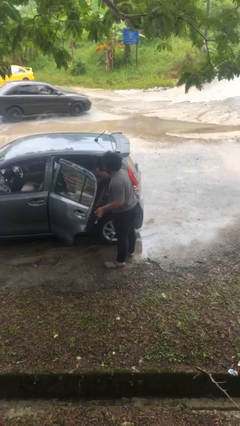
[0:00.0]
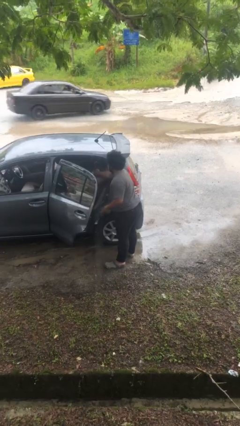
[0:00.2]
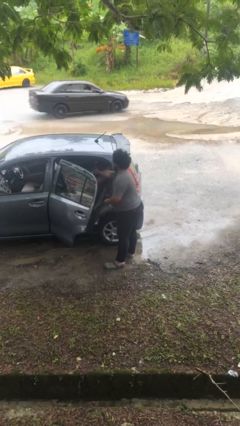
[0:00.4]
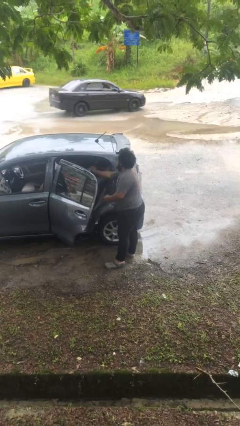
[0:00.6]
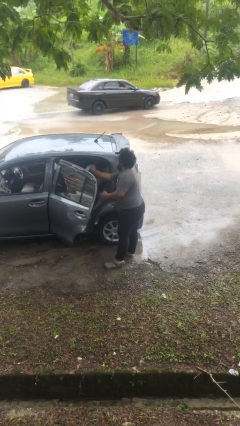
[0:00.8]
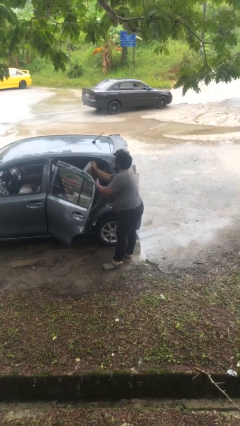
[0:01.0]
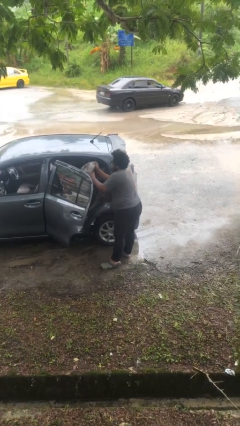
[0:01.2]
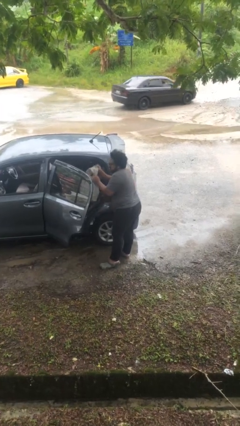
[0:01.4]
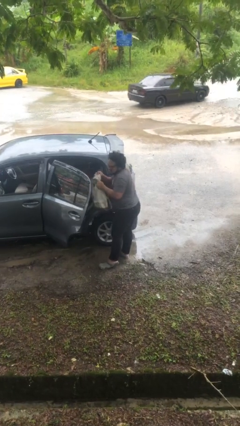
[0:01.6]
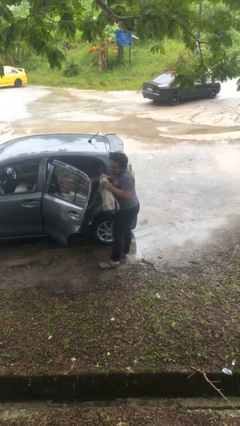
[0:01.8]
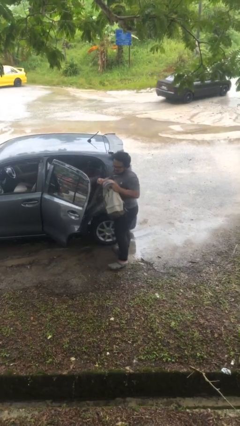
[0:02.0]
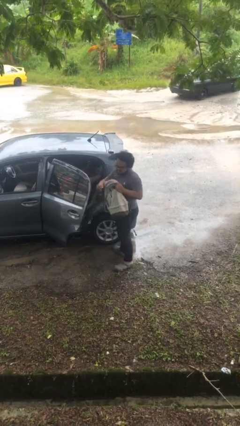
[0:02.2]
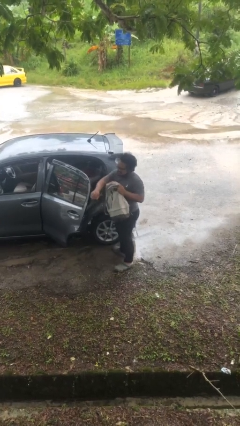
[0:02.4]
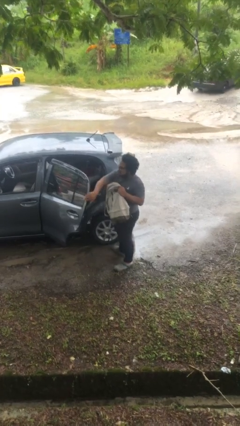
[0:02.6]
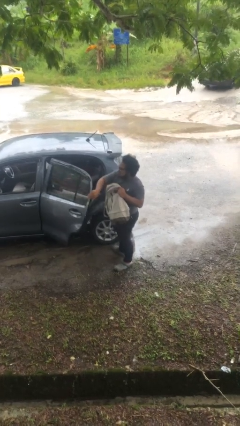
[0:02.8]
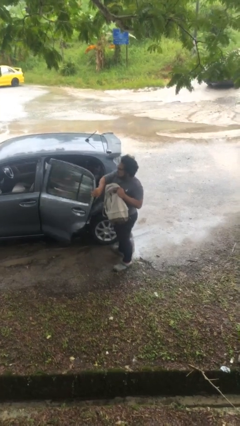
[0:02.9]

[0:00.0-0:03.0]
person unloads car

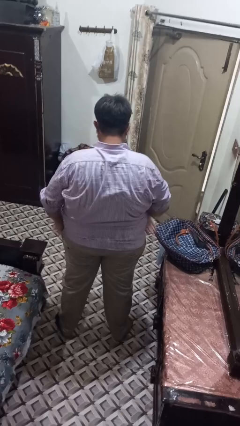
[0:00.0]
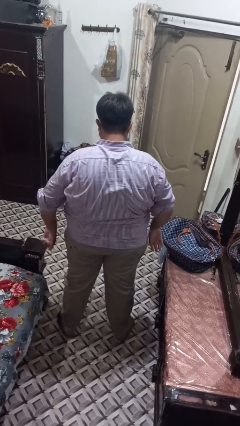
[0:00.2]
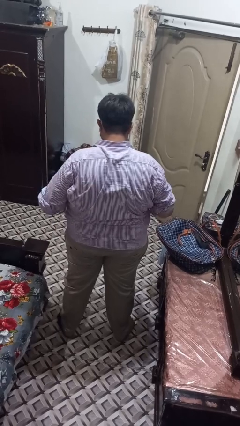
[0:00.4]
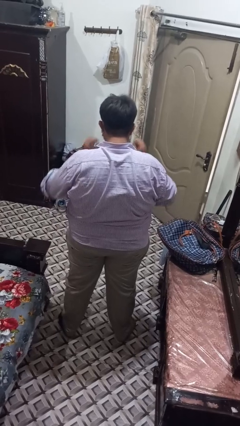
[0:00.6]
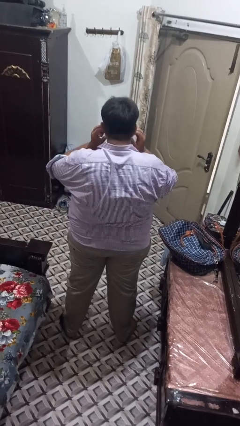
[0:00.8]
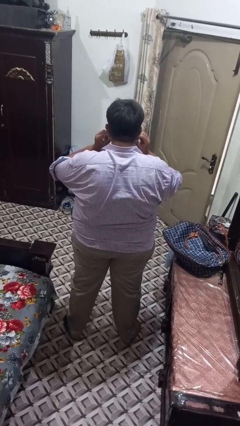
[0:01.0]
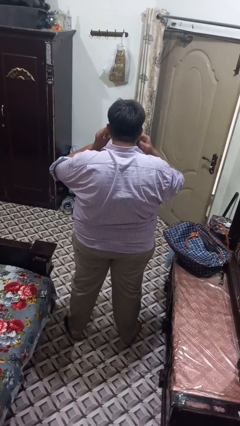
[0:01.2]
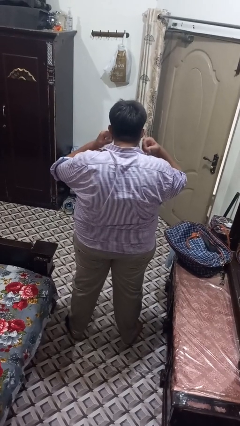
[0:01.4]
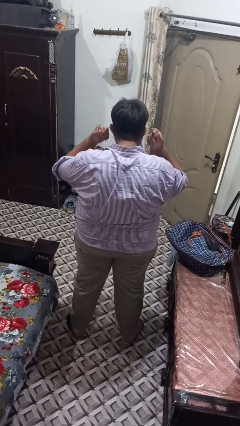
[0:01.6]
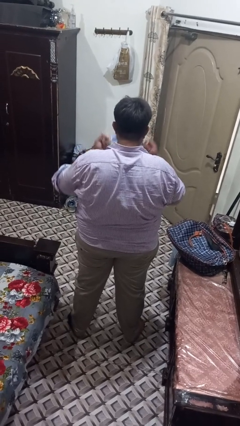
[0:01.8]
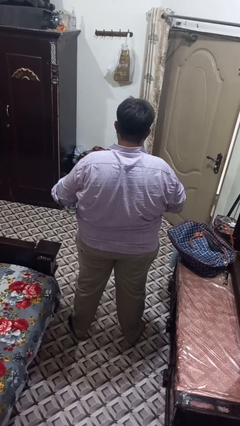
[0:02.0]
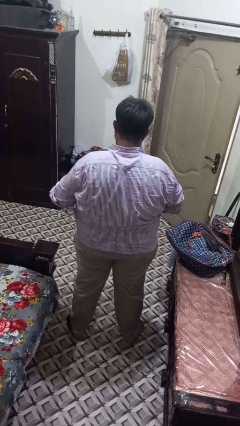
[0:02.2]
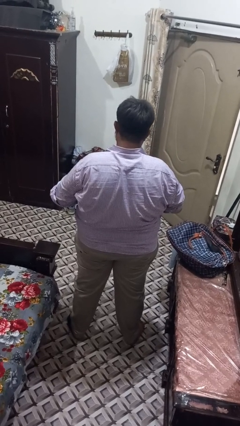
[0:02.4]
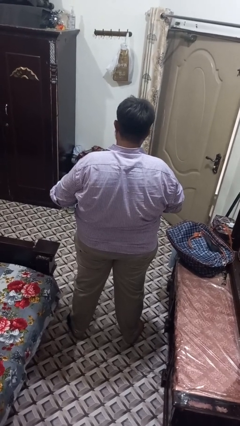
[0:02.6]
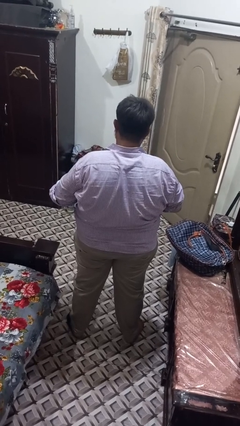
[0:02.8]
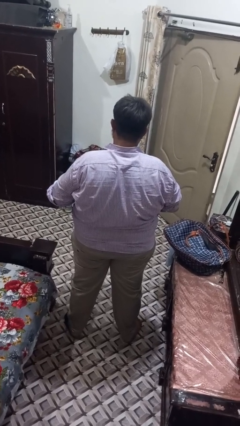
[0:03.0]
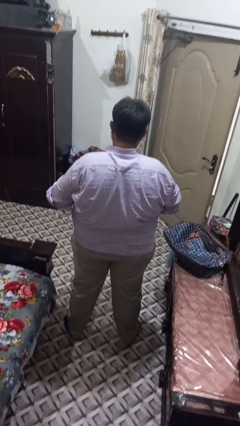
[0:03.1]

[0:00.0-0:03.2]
person takes off facemask

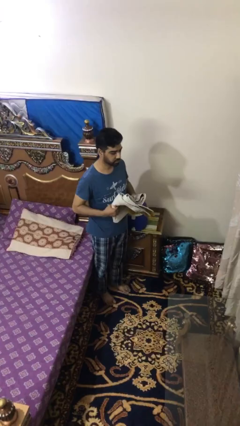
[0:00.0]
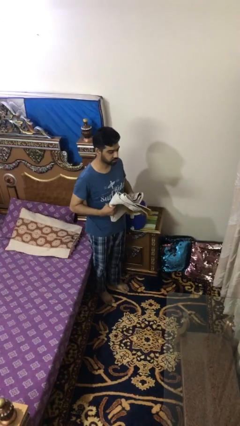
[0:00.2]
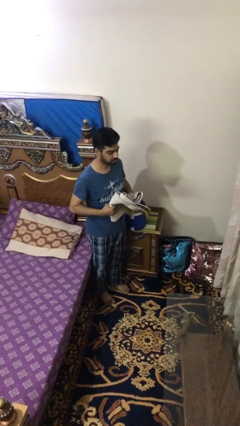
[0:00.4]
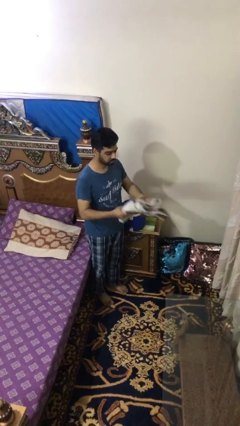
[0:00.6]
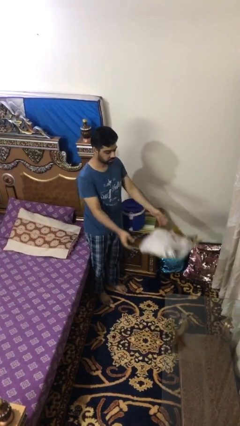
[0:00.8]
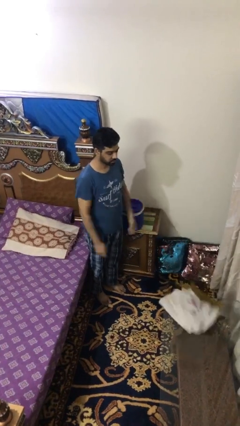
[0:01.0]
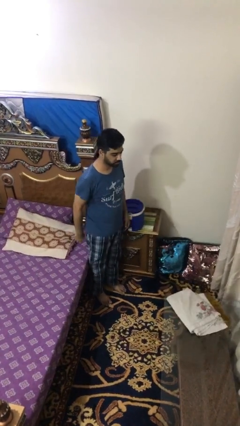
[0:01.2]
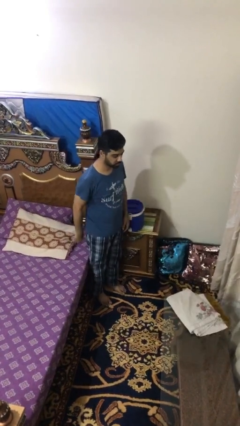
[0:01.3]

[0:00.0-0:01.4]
person throws object on table

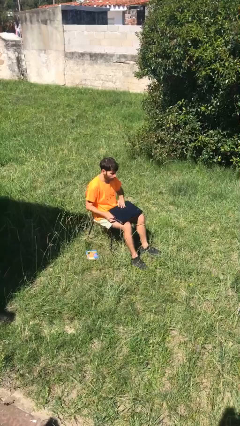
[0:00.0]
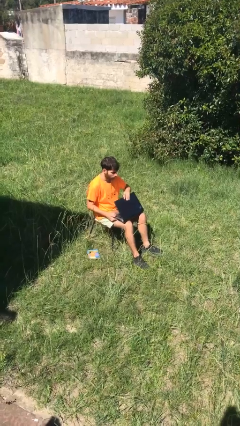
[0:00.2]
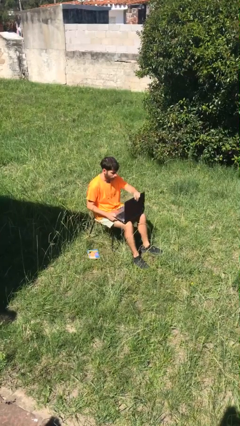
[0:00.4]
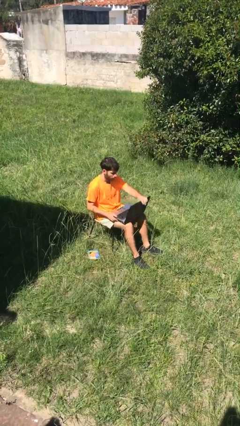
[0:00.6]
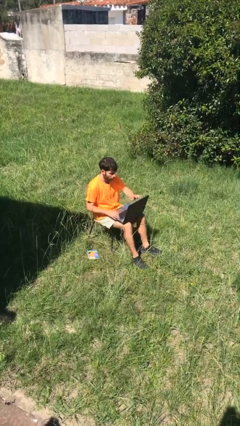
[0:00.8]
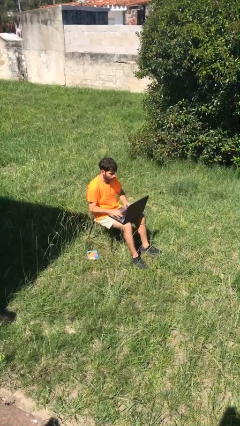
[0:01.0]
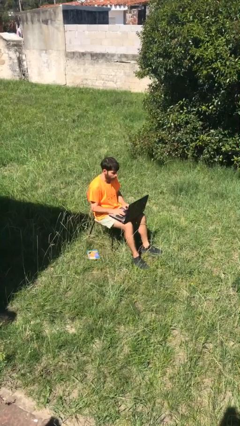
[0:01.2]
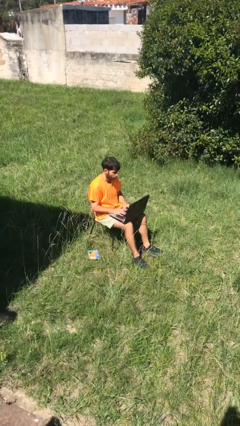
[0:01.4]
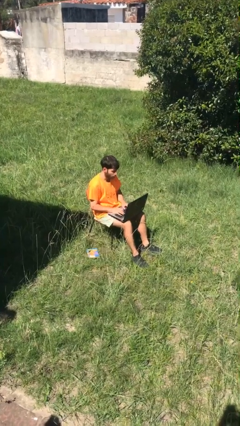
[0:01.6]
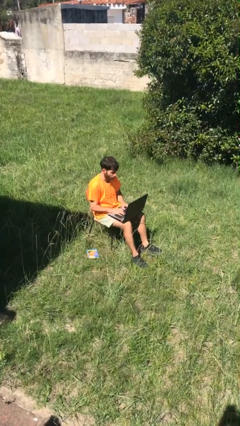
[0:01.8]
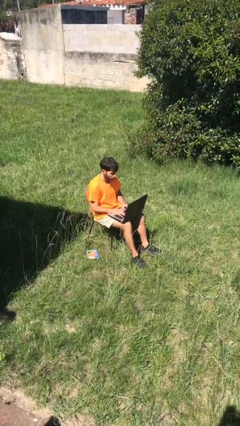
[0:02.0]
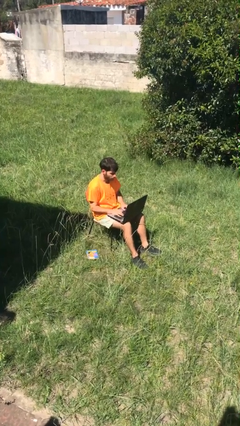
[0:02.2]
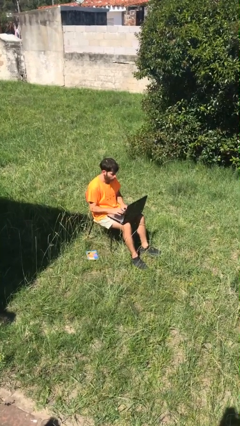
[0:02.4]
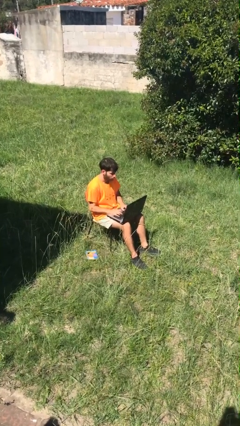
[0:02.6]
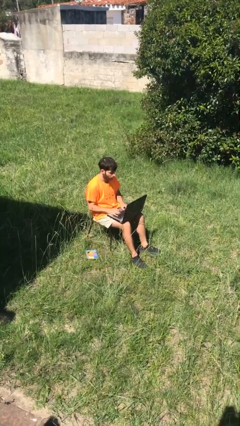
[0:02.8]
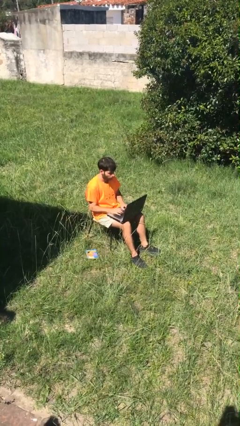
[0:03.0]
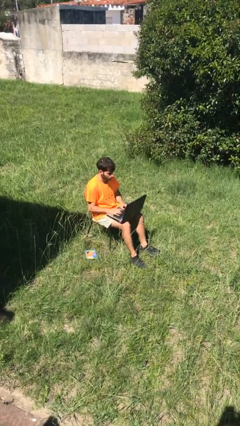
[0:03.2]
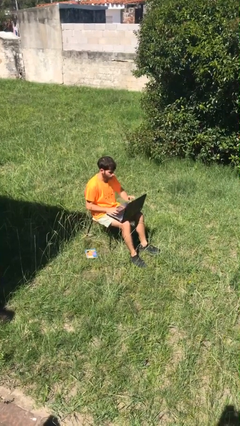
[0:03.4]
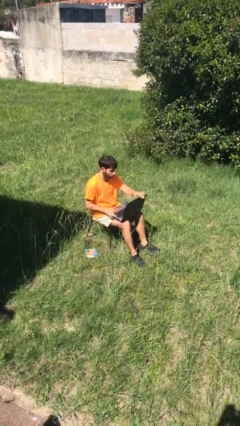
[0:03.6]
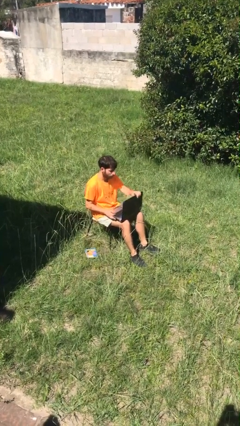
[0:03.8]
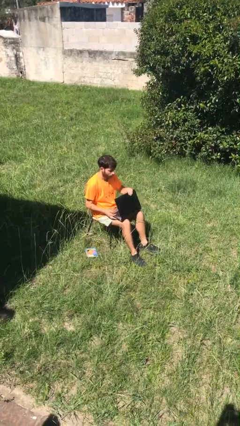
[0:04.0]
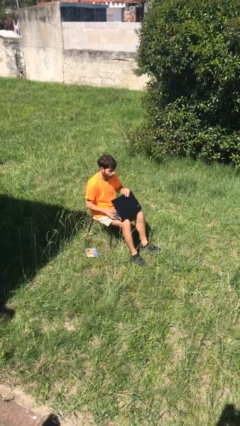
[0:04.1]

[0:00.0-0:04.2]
person interacts with laptop

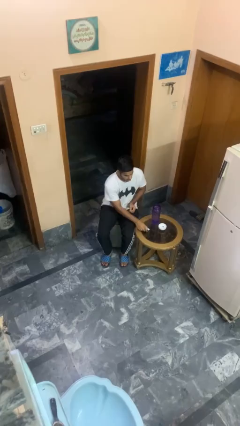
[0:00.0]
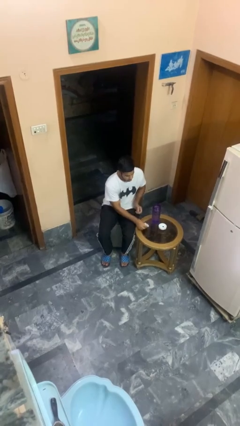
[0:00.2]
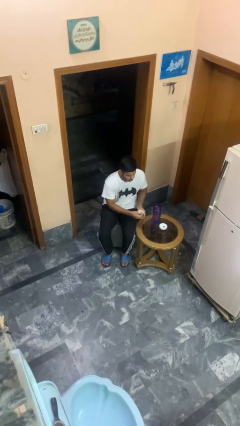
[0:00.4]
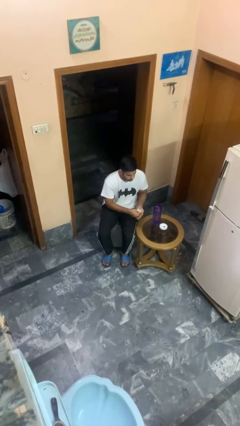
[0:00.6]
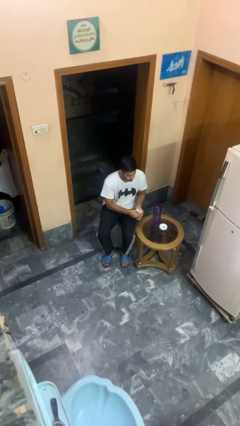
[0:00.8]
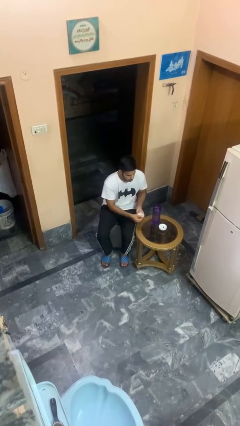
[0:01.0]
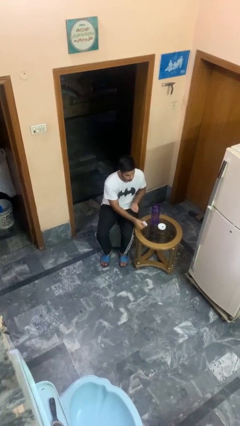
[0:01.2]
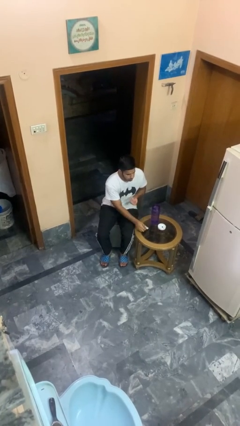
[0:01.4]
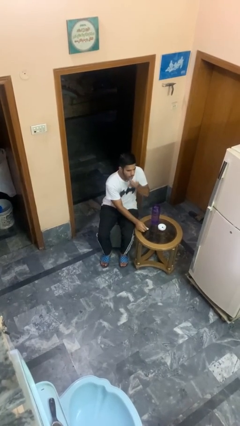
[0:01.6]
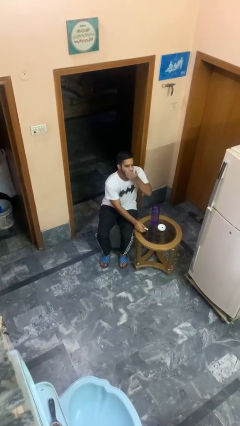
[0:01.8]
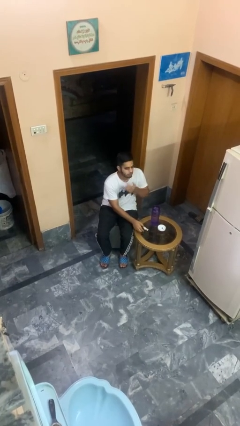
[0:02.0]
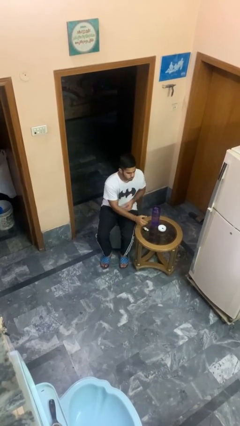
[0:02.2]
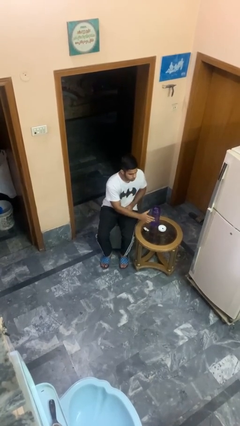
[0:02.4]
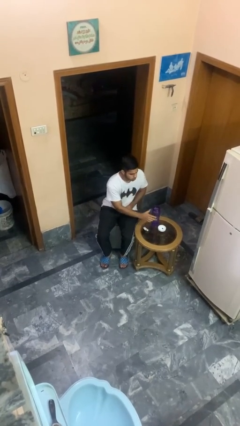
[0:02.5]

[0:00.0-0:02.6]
person takes medicine pills

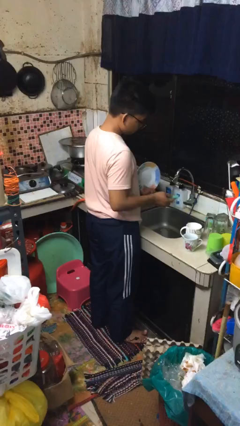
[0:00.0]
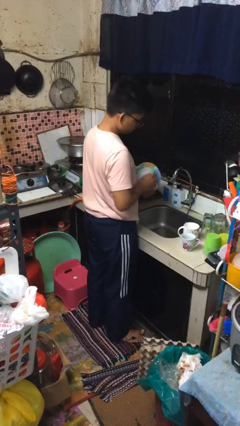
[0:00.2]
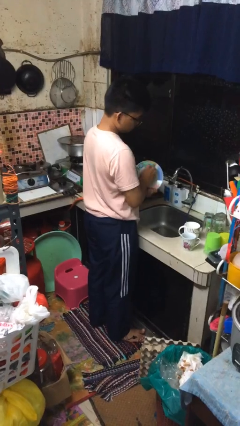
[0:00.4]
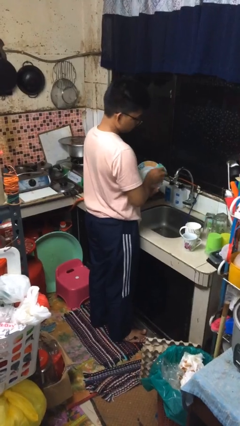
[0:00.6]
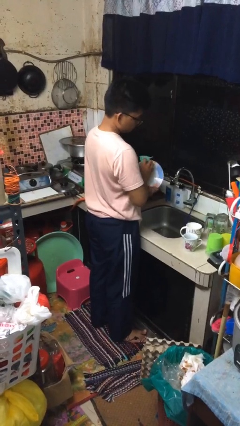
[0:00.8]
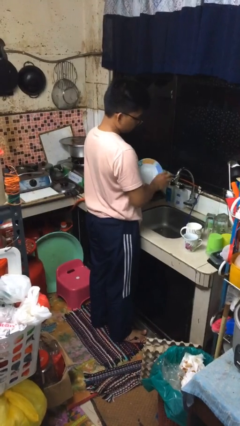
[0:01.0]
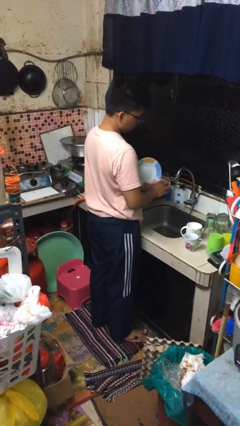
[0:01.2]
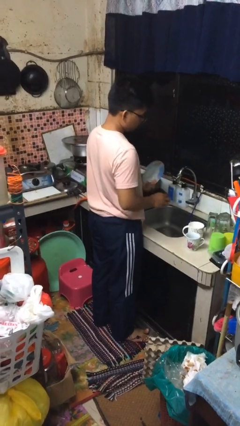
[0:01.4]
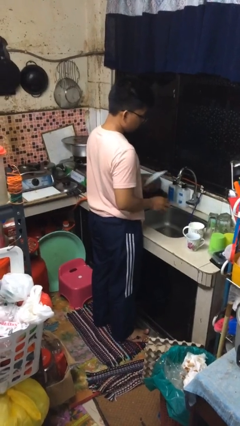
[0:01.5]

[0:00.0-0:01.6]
person washes dish

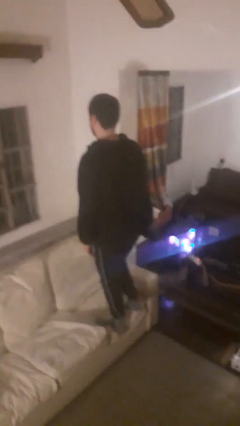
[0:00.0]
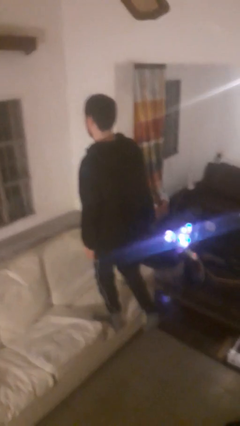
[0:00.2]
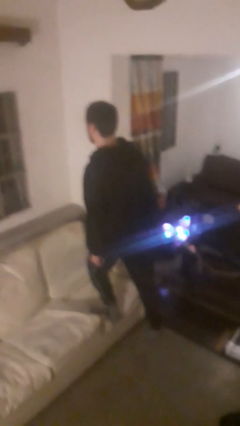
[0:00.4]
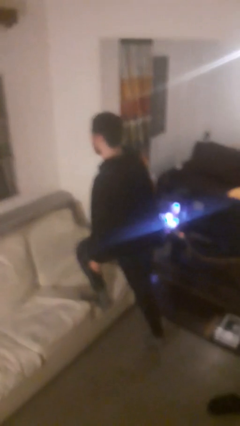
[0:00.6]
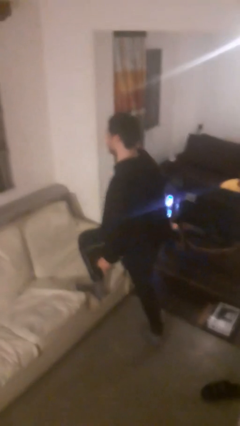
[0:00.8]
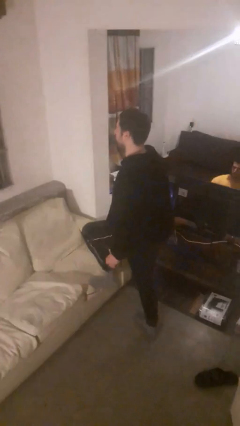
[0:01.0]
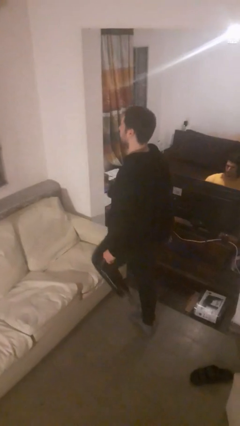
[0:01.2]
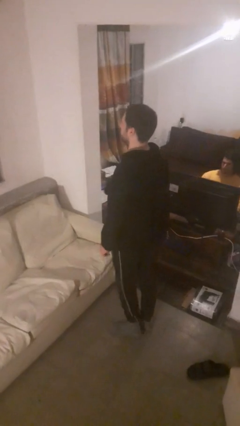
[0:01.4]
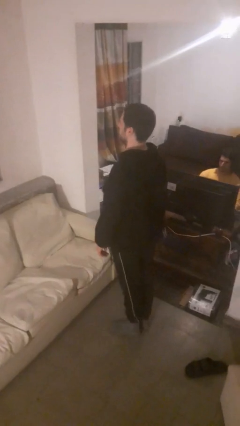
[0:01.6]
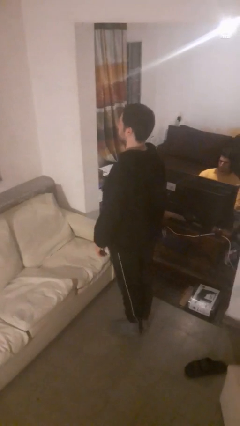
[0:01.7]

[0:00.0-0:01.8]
person climbs off couch
